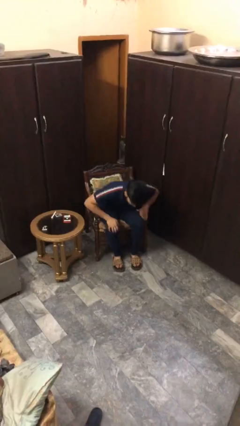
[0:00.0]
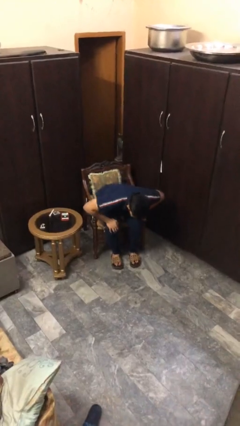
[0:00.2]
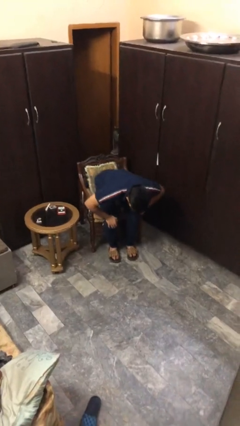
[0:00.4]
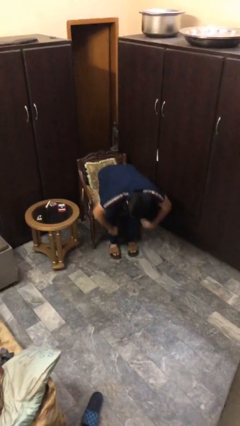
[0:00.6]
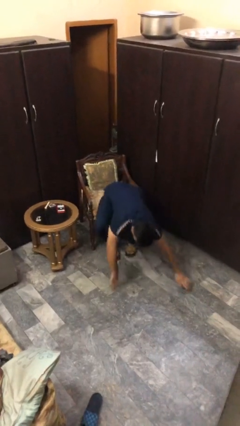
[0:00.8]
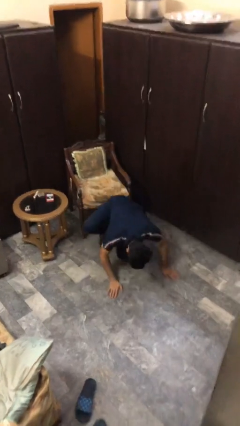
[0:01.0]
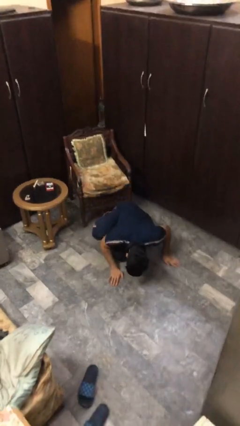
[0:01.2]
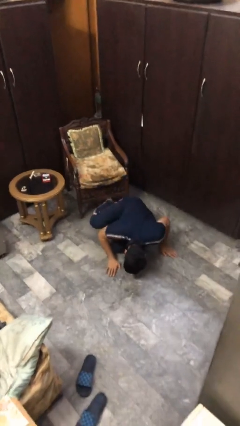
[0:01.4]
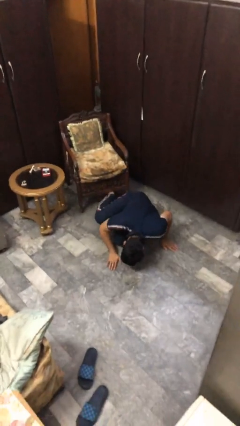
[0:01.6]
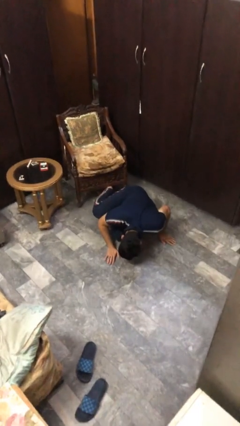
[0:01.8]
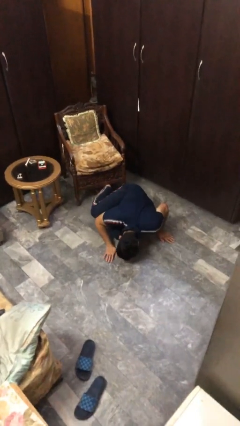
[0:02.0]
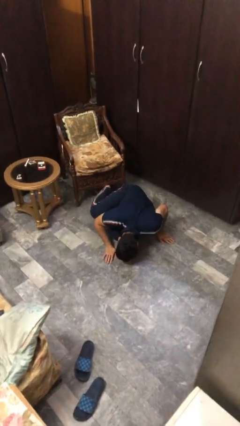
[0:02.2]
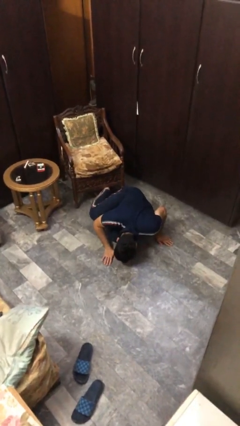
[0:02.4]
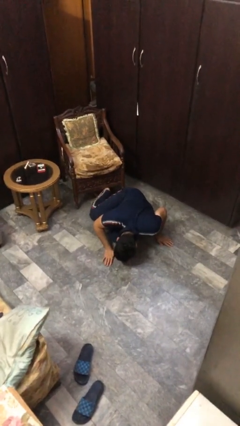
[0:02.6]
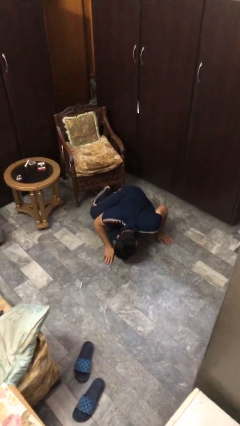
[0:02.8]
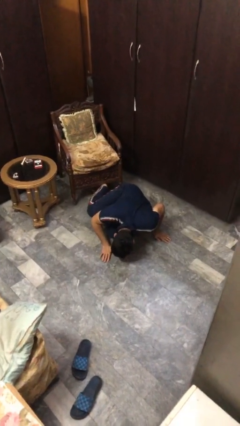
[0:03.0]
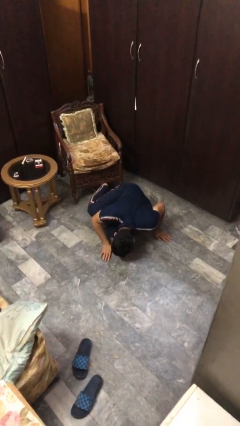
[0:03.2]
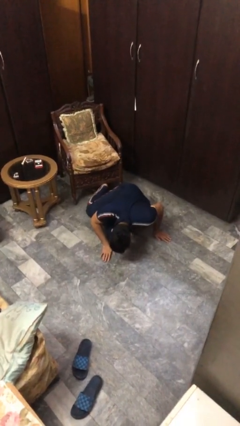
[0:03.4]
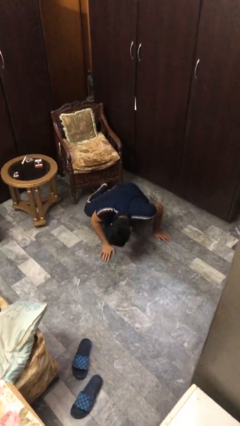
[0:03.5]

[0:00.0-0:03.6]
person falls from chair

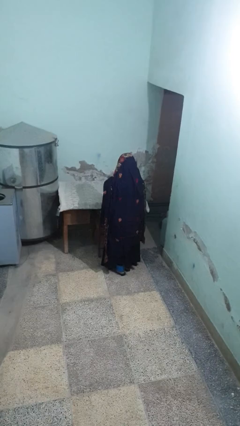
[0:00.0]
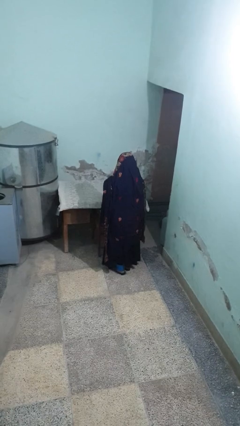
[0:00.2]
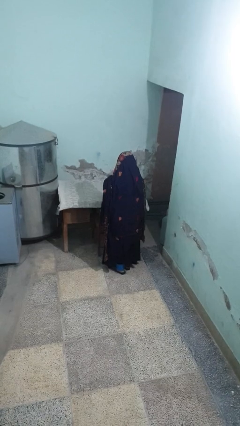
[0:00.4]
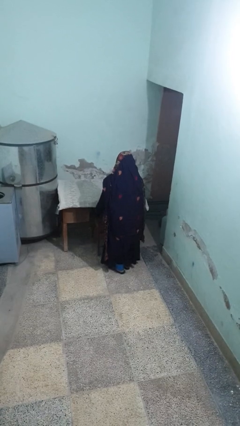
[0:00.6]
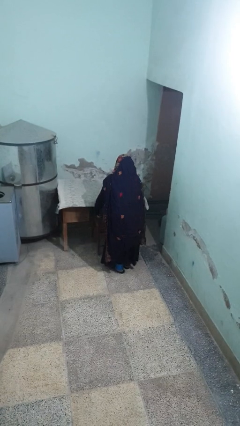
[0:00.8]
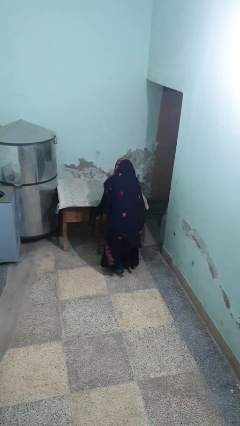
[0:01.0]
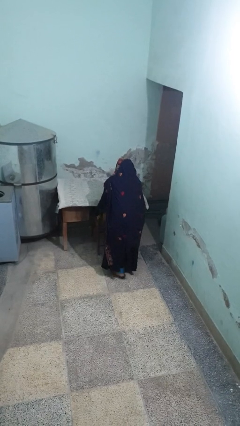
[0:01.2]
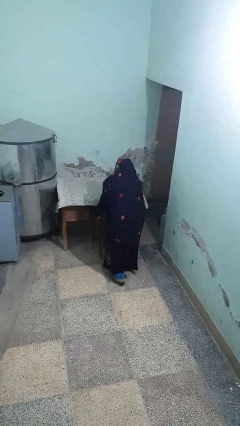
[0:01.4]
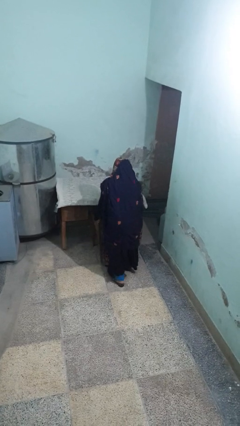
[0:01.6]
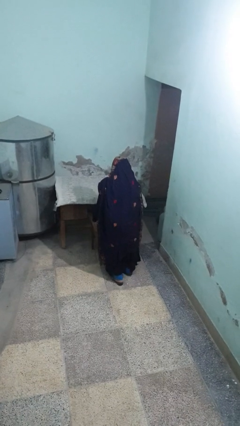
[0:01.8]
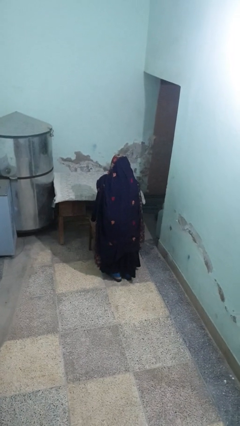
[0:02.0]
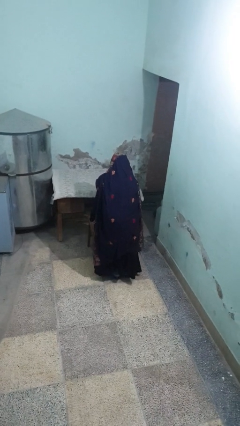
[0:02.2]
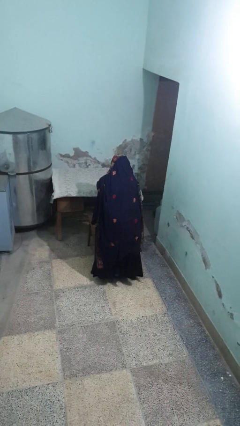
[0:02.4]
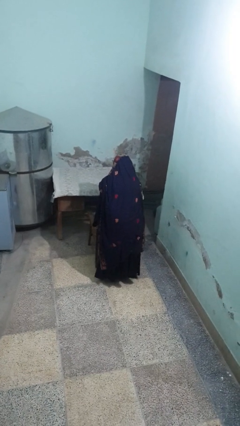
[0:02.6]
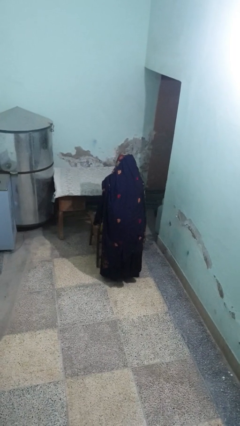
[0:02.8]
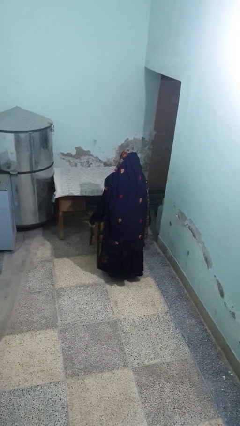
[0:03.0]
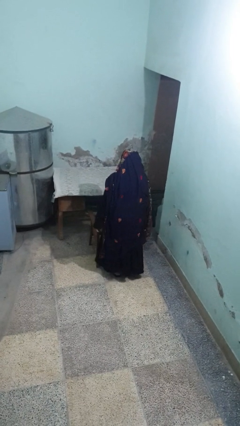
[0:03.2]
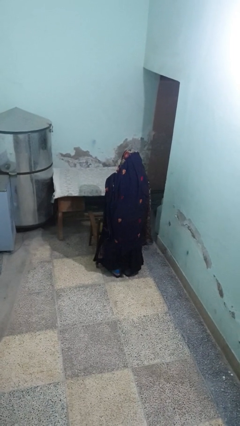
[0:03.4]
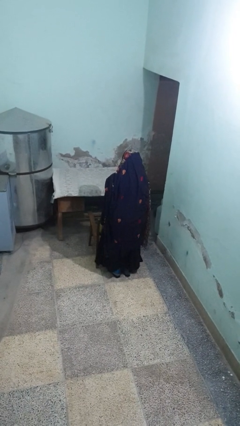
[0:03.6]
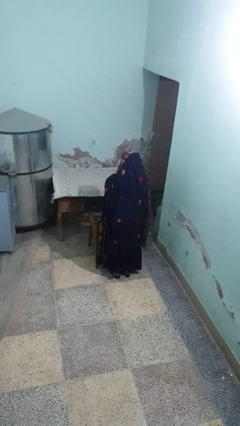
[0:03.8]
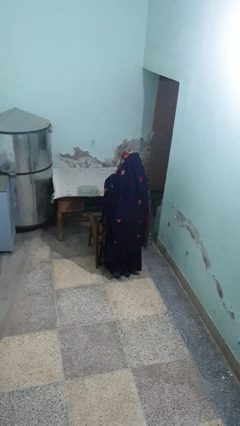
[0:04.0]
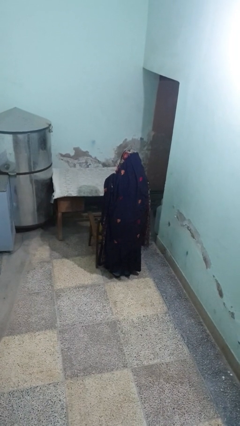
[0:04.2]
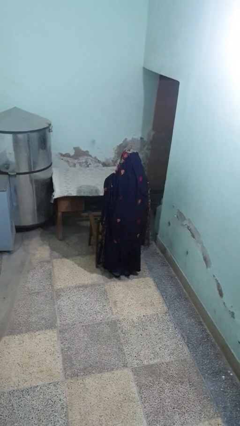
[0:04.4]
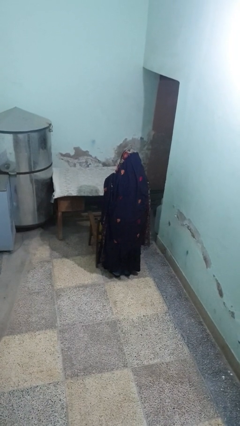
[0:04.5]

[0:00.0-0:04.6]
person pulls out chair

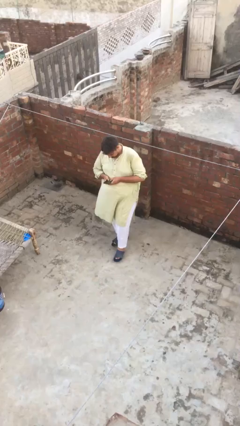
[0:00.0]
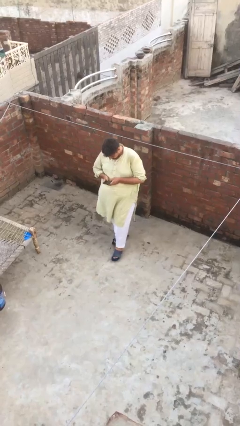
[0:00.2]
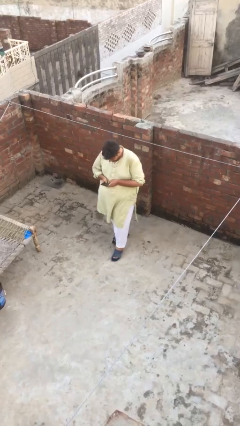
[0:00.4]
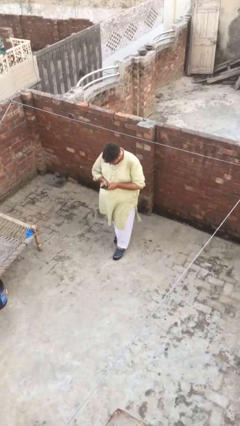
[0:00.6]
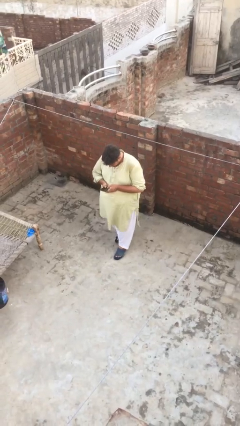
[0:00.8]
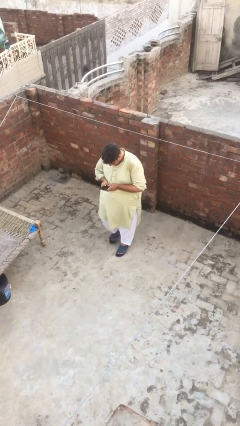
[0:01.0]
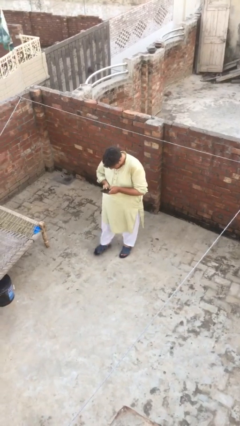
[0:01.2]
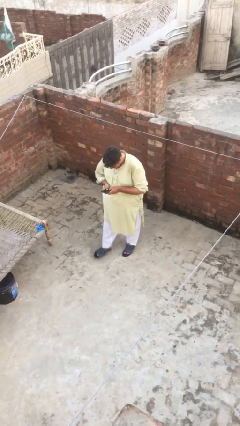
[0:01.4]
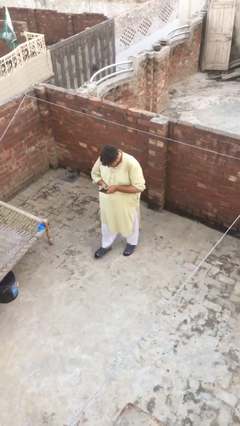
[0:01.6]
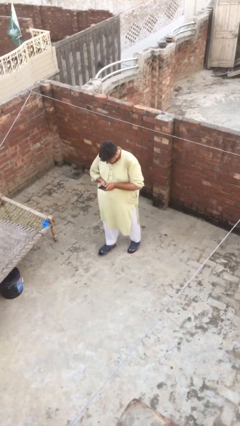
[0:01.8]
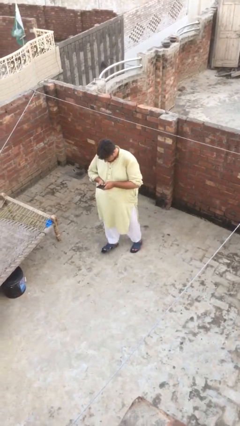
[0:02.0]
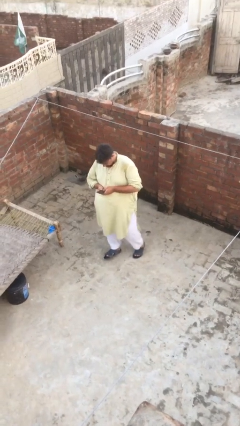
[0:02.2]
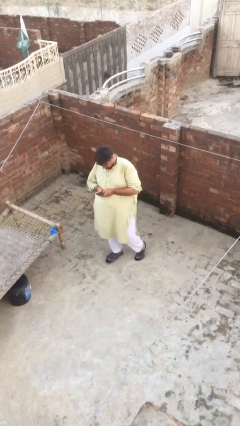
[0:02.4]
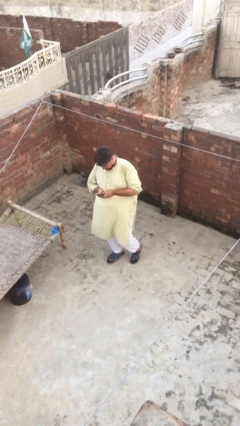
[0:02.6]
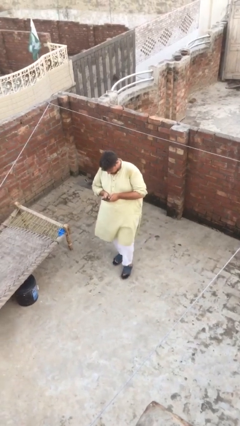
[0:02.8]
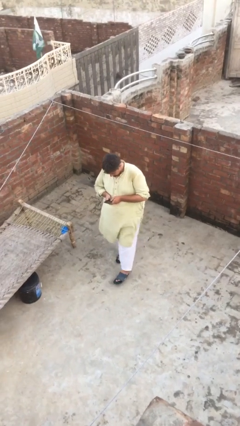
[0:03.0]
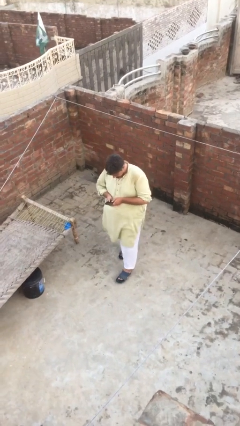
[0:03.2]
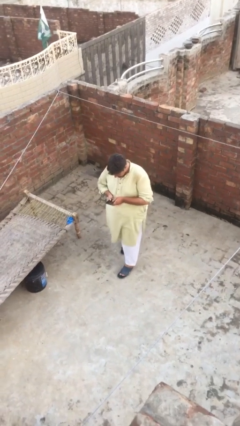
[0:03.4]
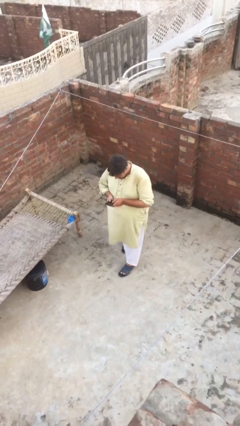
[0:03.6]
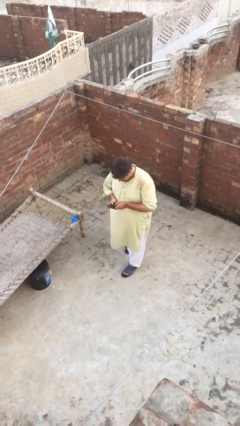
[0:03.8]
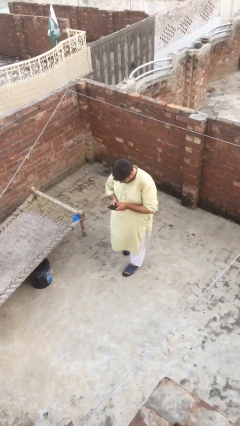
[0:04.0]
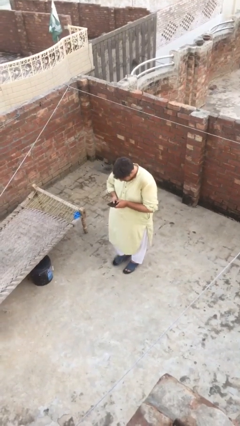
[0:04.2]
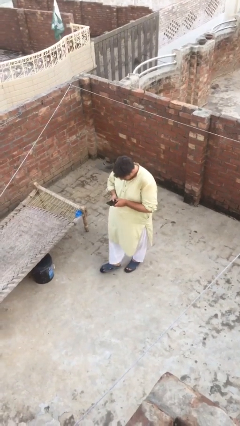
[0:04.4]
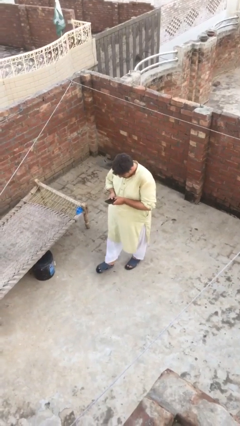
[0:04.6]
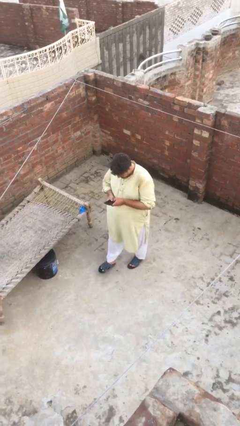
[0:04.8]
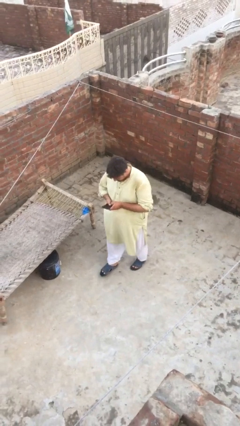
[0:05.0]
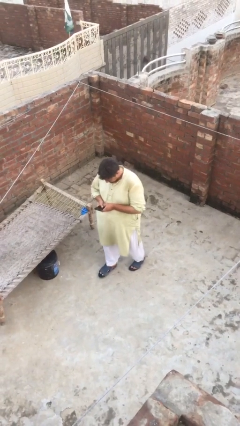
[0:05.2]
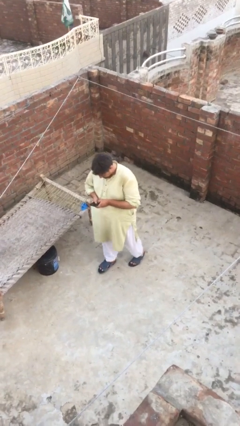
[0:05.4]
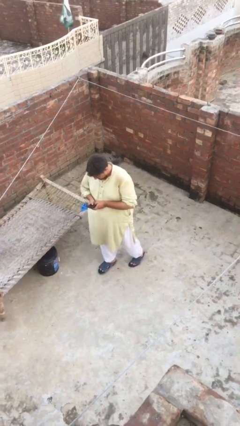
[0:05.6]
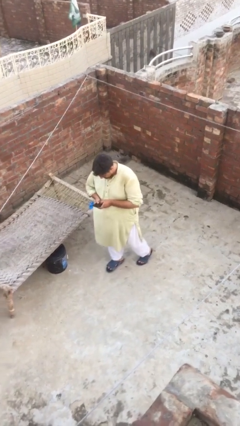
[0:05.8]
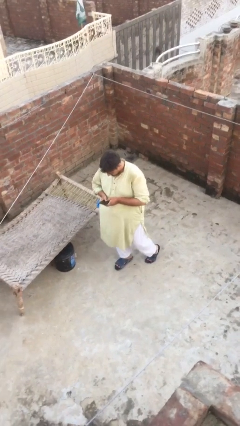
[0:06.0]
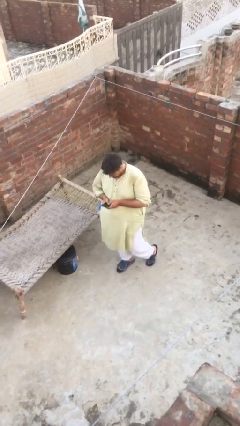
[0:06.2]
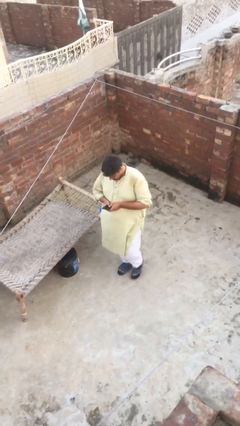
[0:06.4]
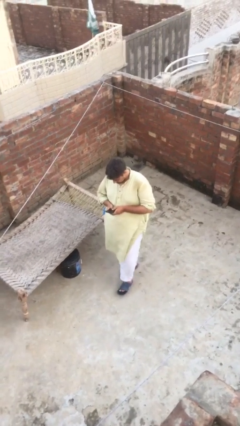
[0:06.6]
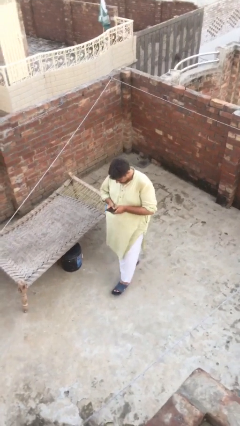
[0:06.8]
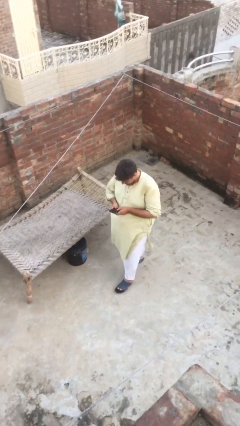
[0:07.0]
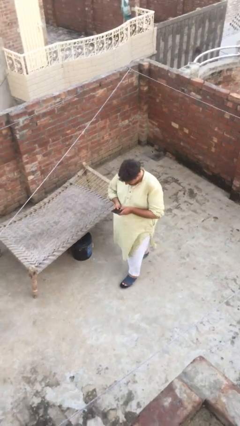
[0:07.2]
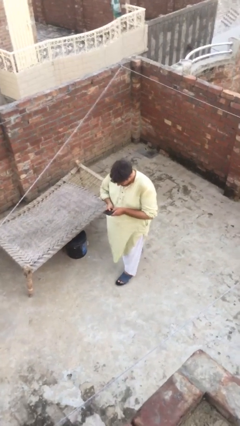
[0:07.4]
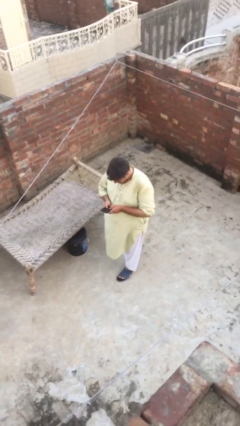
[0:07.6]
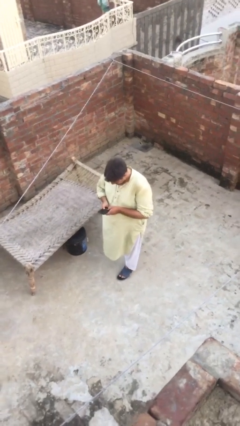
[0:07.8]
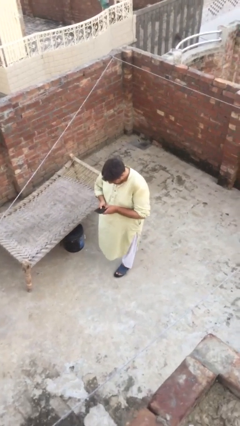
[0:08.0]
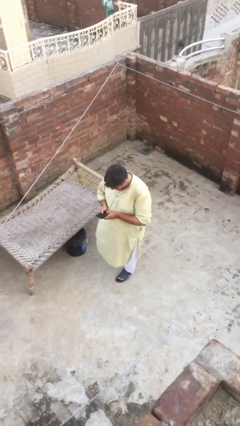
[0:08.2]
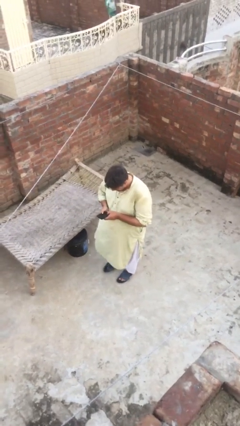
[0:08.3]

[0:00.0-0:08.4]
person texts on phone

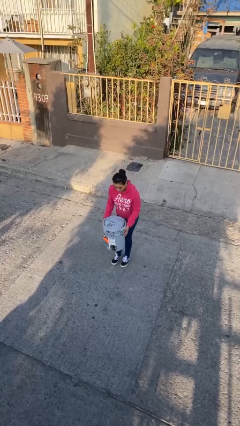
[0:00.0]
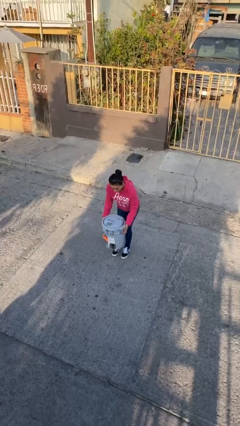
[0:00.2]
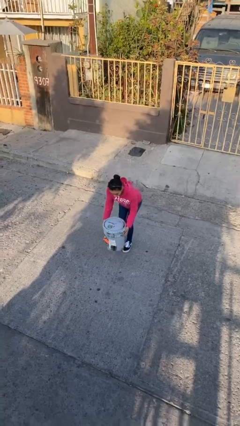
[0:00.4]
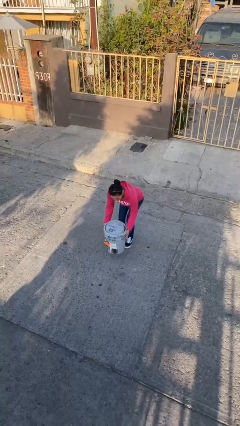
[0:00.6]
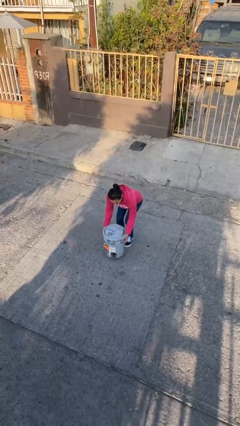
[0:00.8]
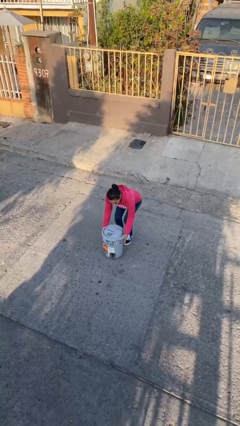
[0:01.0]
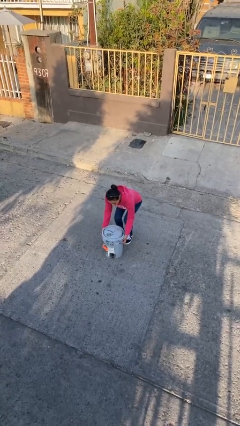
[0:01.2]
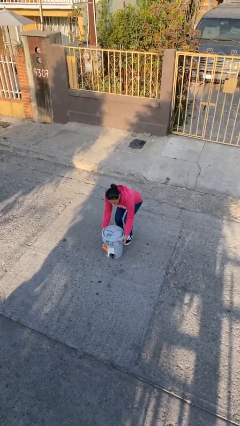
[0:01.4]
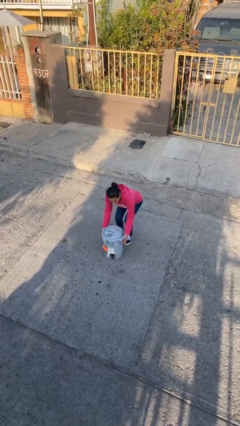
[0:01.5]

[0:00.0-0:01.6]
person puts down object on floor
